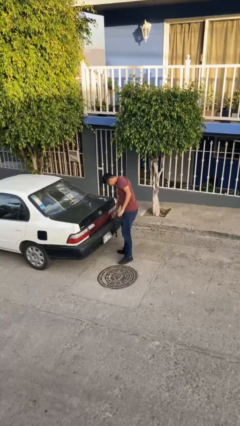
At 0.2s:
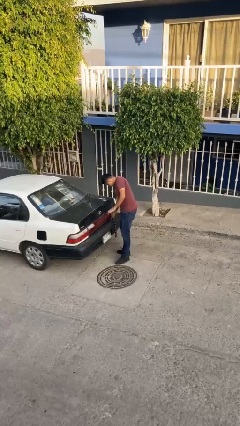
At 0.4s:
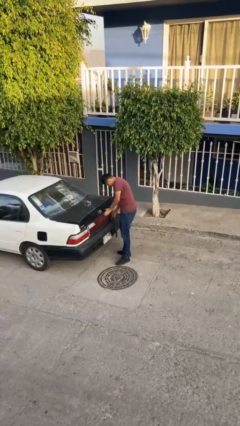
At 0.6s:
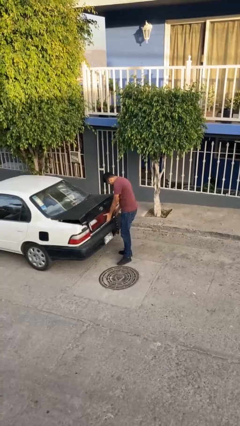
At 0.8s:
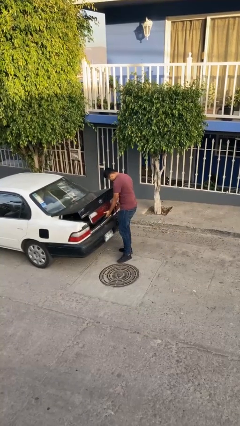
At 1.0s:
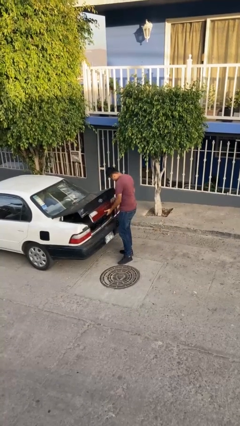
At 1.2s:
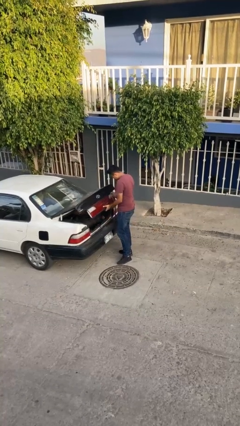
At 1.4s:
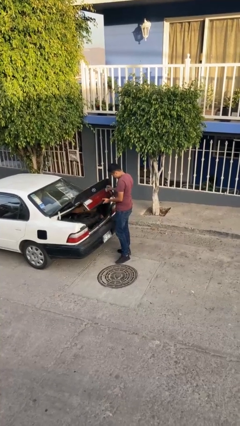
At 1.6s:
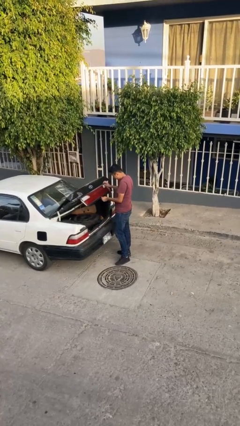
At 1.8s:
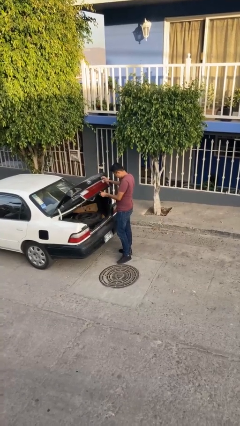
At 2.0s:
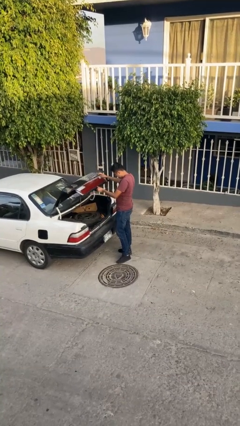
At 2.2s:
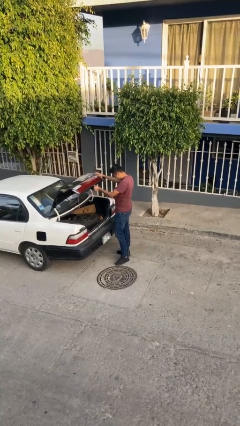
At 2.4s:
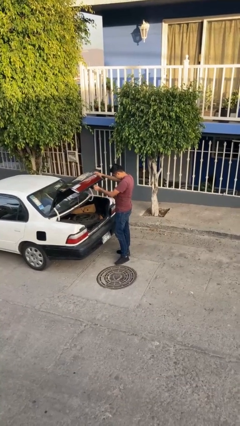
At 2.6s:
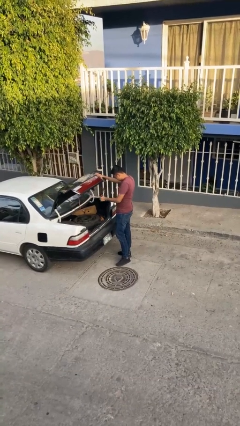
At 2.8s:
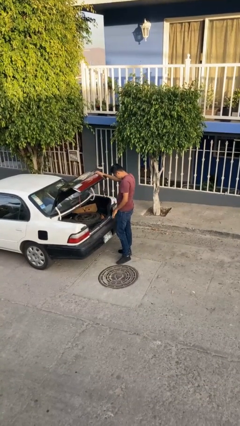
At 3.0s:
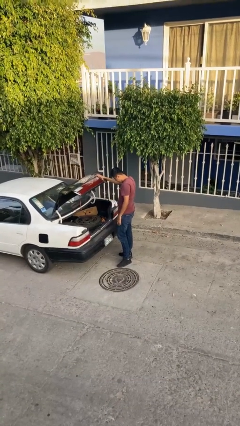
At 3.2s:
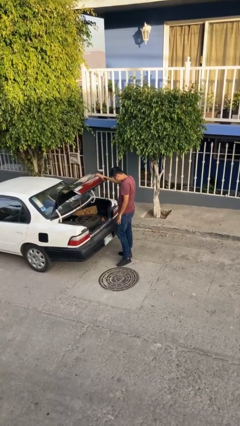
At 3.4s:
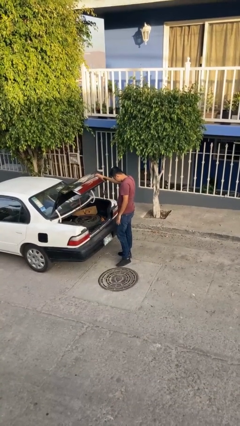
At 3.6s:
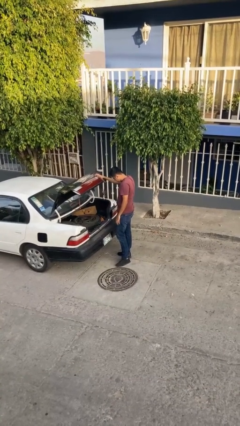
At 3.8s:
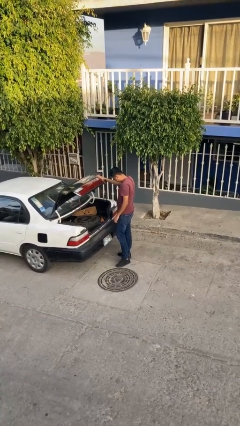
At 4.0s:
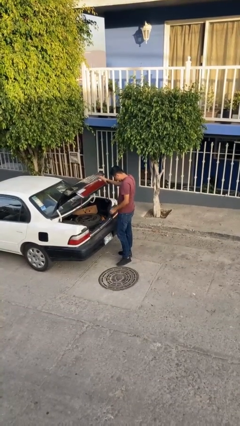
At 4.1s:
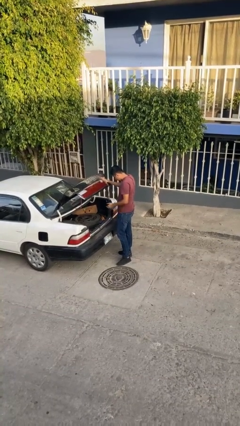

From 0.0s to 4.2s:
person opens car trunk

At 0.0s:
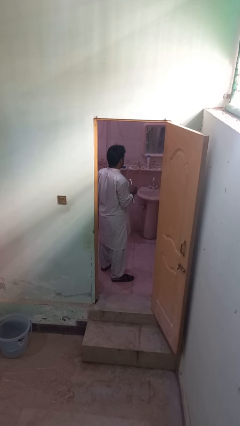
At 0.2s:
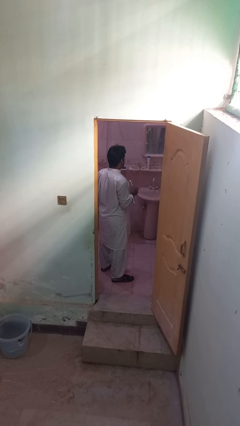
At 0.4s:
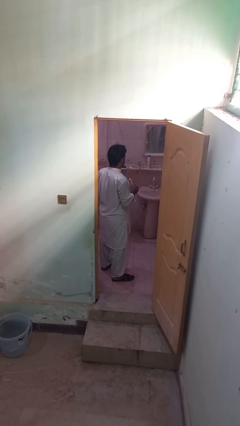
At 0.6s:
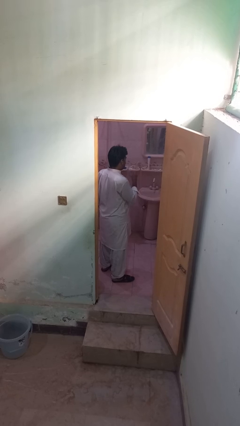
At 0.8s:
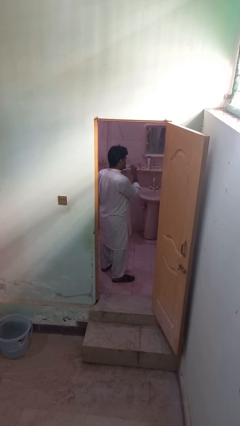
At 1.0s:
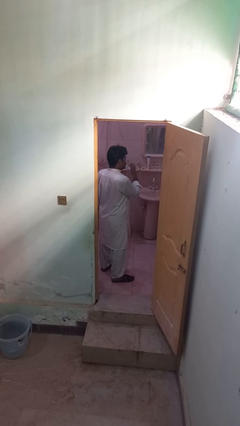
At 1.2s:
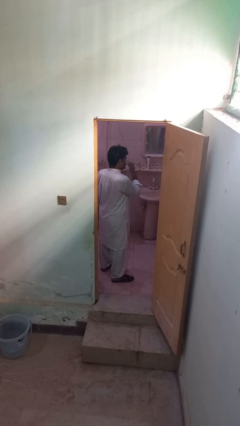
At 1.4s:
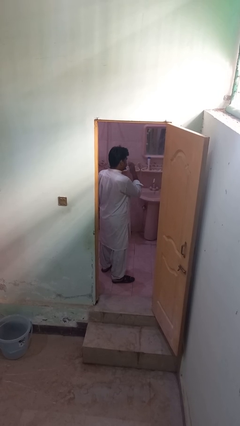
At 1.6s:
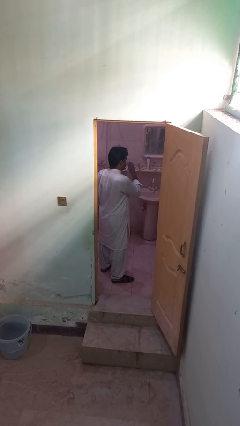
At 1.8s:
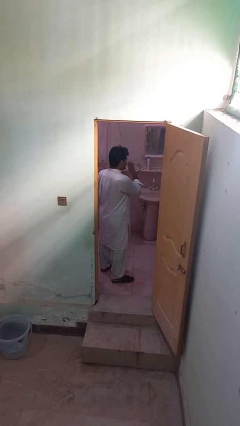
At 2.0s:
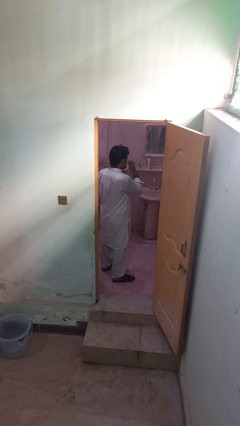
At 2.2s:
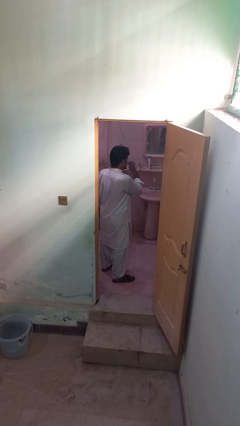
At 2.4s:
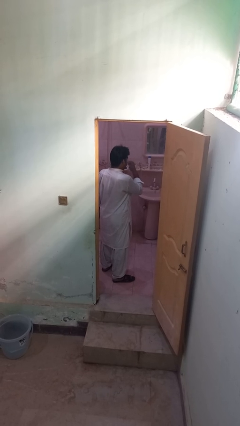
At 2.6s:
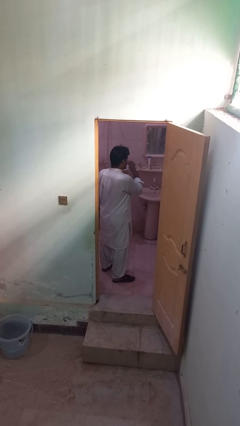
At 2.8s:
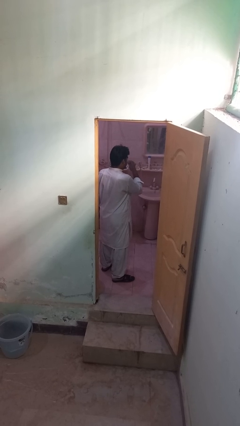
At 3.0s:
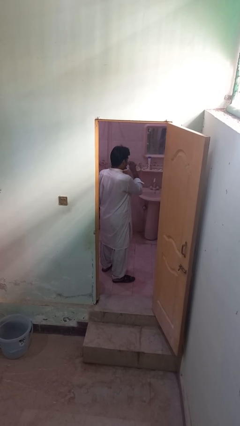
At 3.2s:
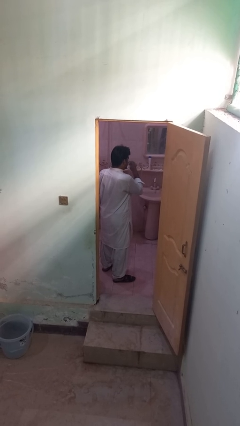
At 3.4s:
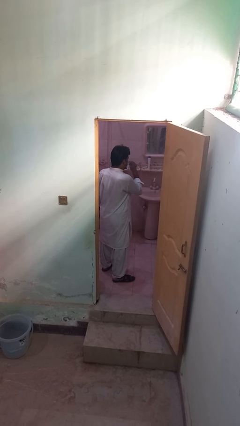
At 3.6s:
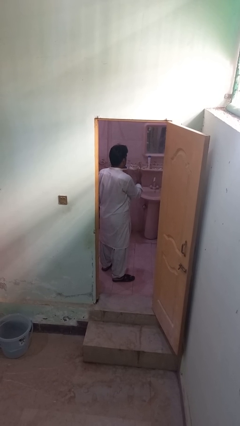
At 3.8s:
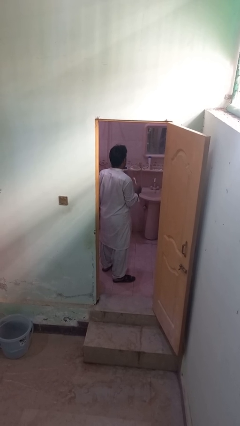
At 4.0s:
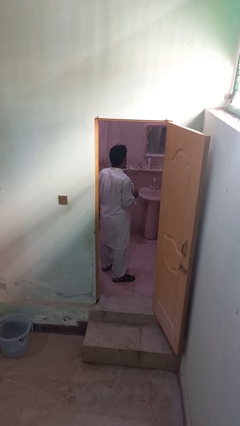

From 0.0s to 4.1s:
person brushes teeth

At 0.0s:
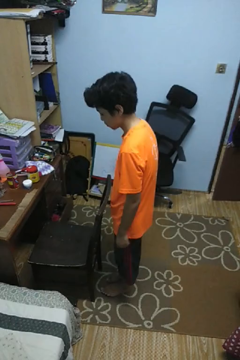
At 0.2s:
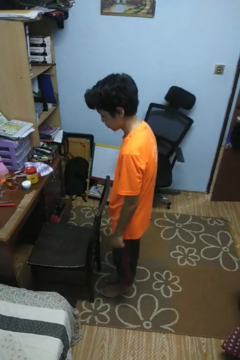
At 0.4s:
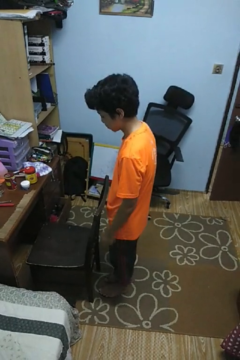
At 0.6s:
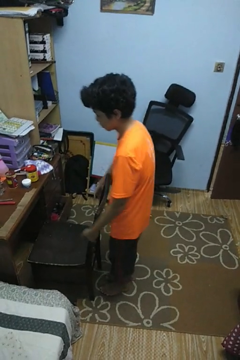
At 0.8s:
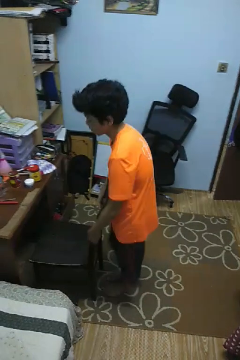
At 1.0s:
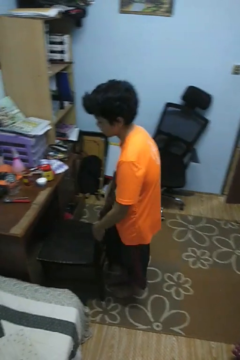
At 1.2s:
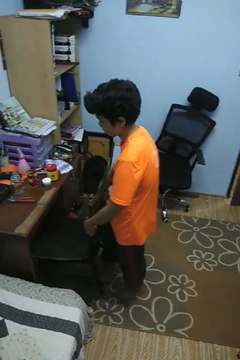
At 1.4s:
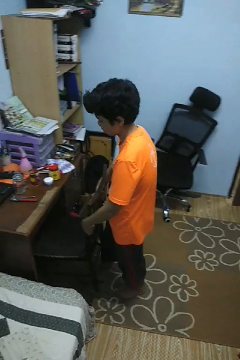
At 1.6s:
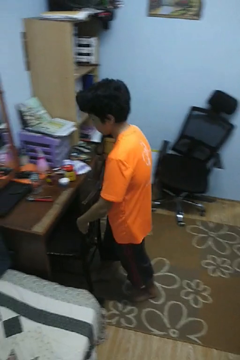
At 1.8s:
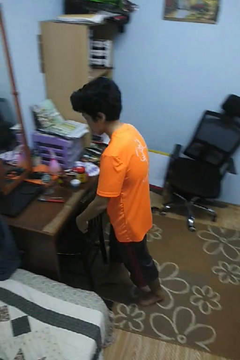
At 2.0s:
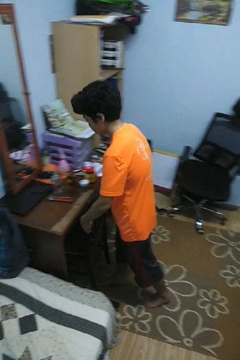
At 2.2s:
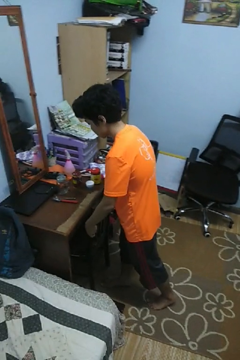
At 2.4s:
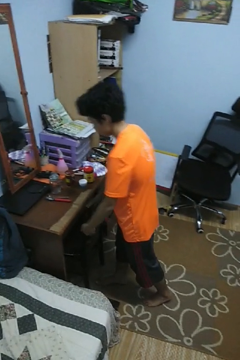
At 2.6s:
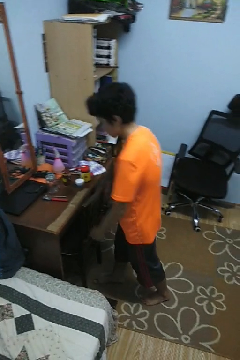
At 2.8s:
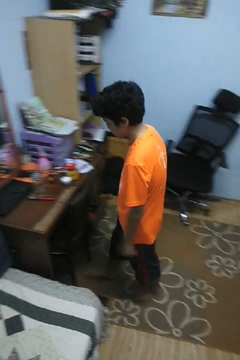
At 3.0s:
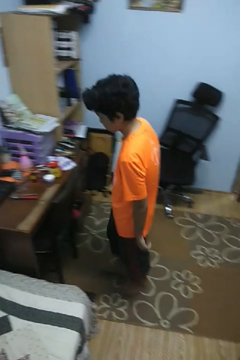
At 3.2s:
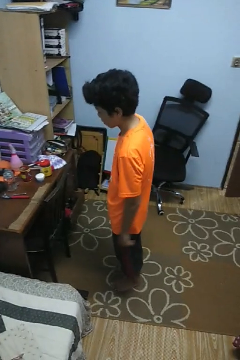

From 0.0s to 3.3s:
person pushes in chair

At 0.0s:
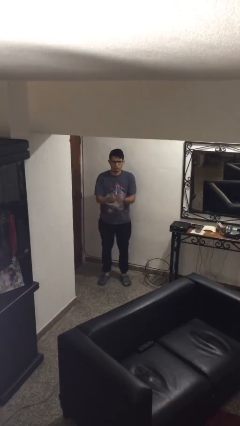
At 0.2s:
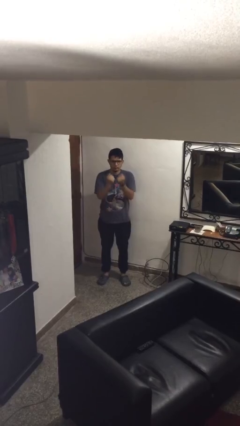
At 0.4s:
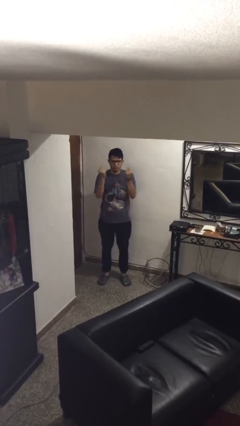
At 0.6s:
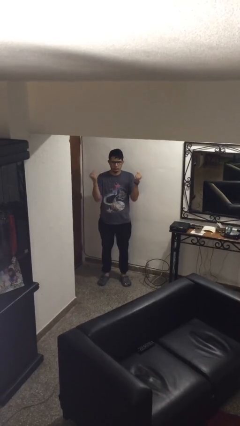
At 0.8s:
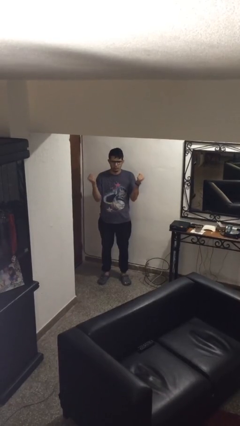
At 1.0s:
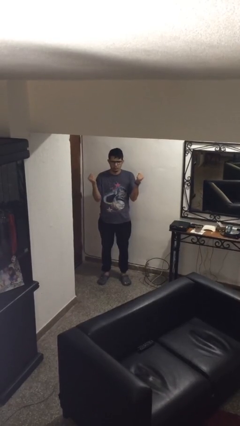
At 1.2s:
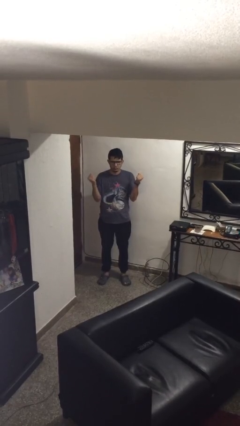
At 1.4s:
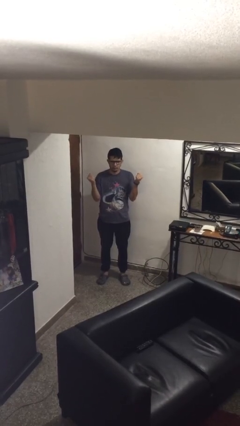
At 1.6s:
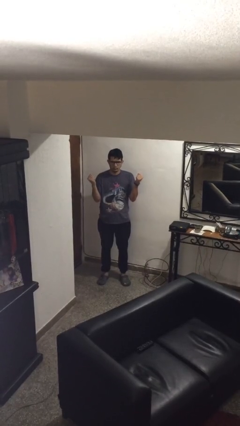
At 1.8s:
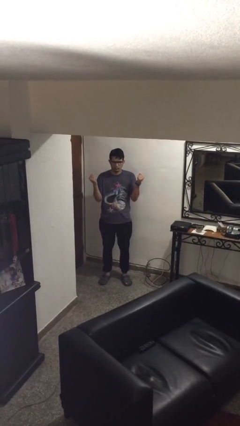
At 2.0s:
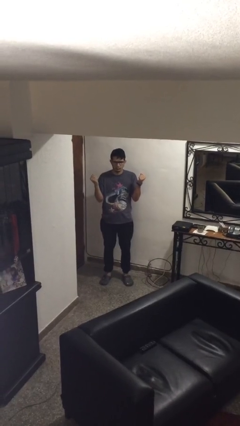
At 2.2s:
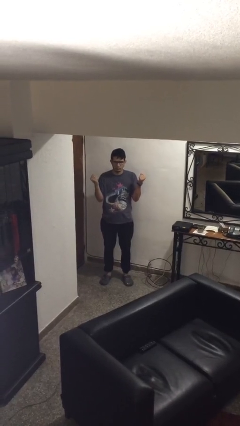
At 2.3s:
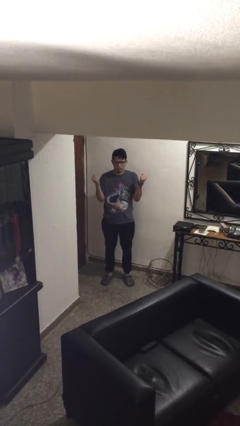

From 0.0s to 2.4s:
person gestures zoom in

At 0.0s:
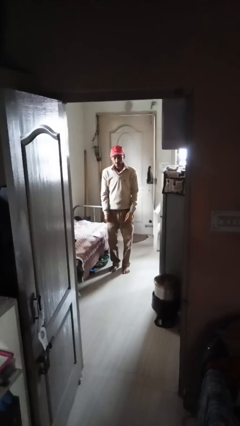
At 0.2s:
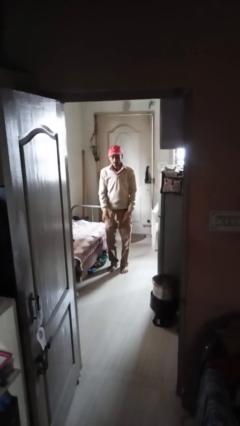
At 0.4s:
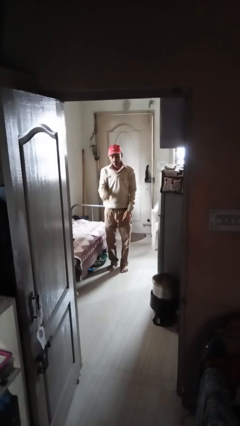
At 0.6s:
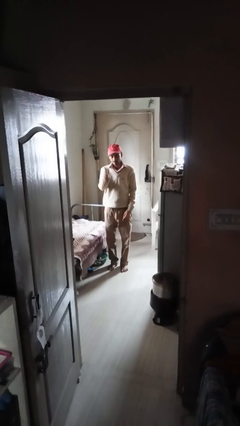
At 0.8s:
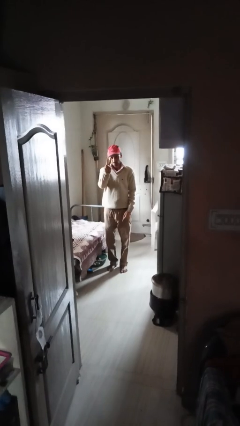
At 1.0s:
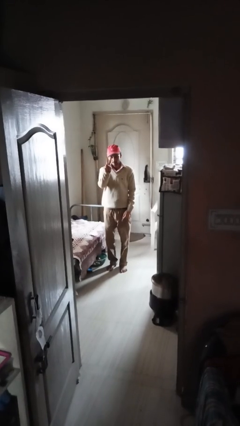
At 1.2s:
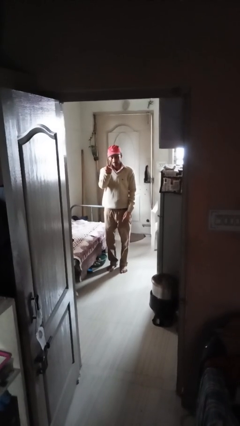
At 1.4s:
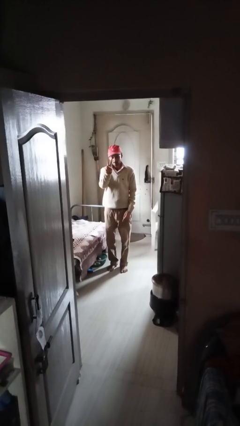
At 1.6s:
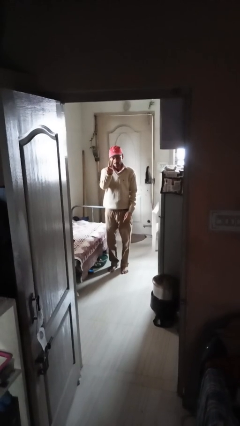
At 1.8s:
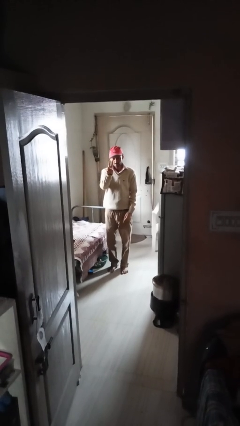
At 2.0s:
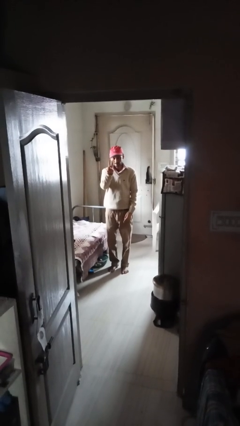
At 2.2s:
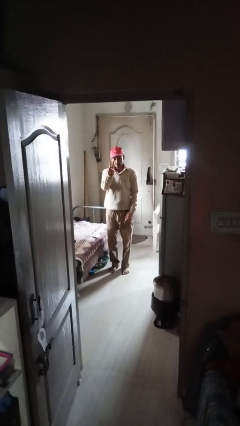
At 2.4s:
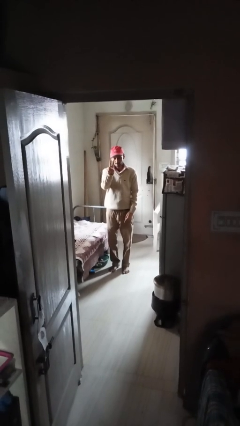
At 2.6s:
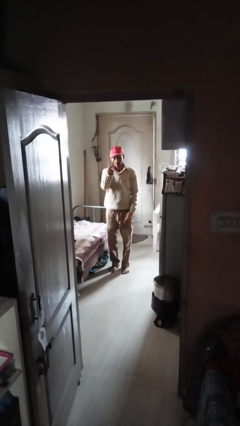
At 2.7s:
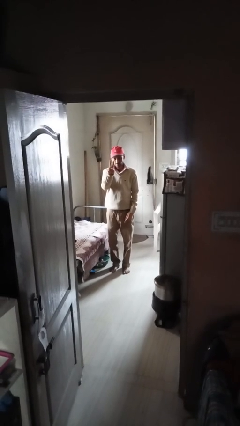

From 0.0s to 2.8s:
person gestures peace

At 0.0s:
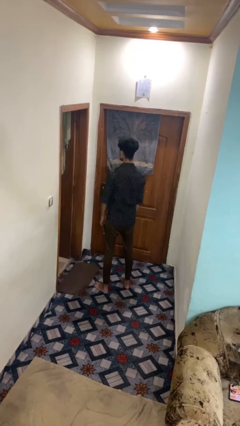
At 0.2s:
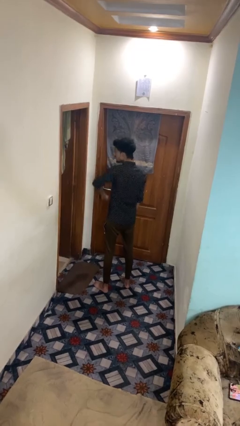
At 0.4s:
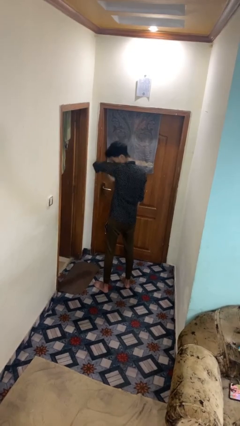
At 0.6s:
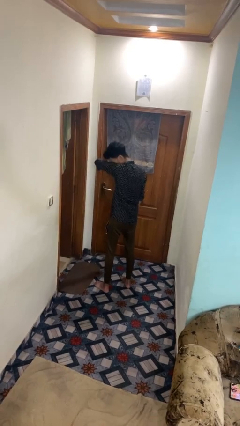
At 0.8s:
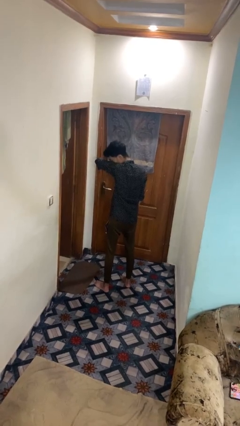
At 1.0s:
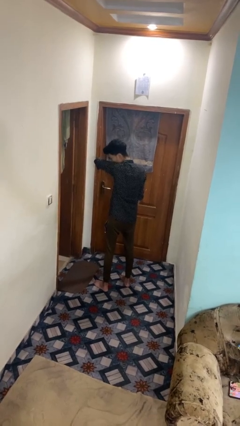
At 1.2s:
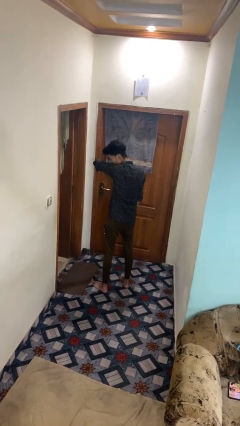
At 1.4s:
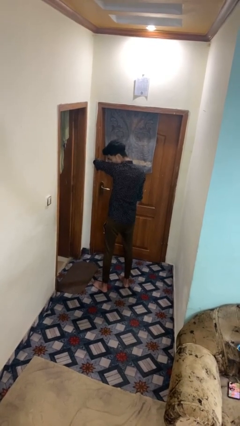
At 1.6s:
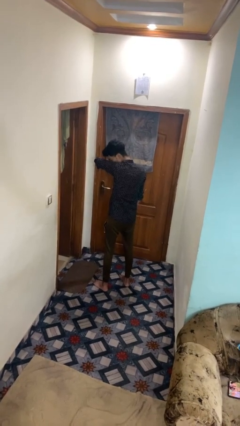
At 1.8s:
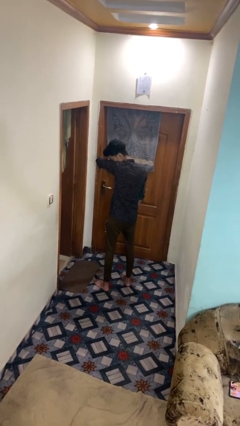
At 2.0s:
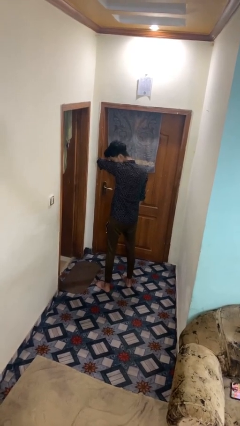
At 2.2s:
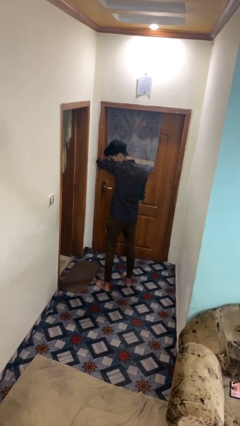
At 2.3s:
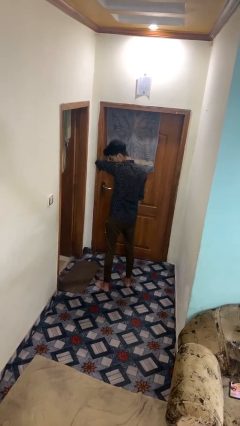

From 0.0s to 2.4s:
person sneezes into arm
